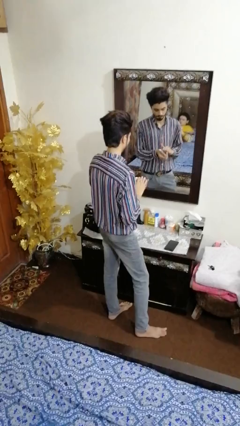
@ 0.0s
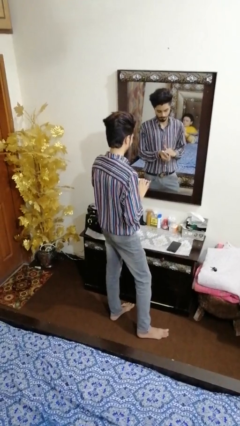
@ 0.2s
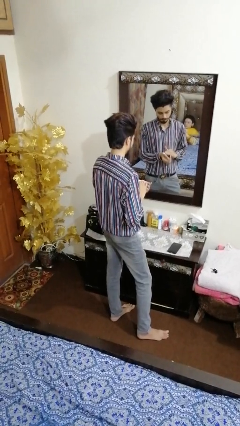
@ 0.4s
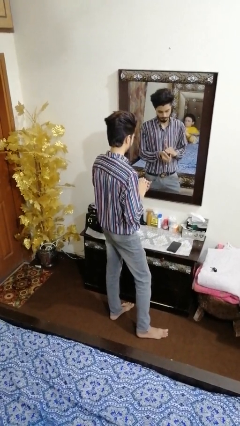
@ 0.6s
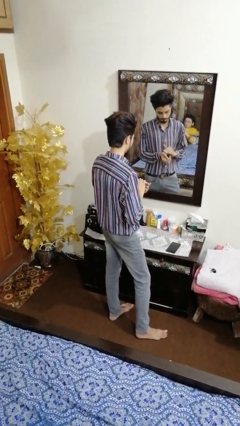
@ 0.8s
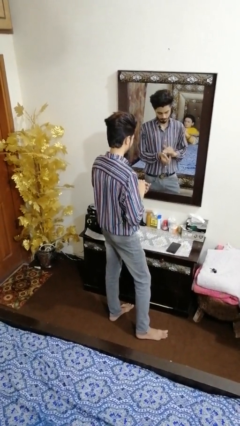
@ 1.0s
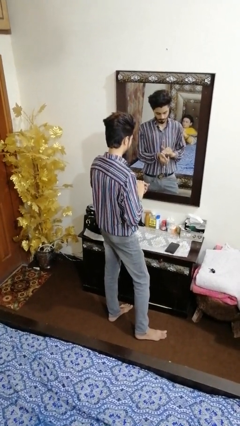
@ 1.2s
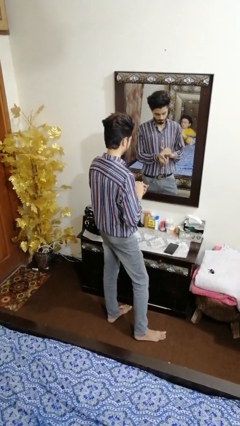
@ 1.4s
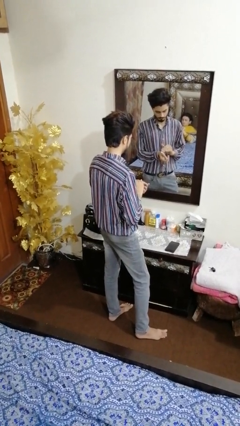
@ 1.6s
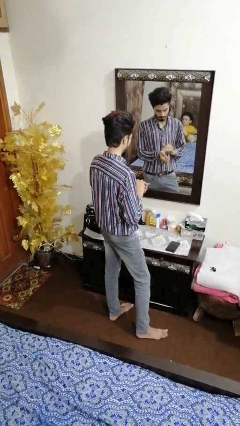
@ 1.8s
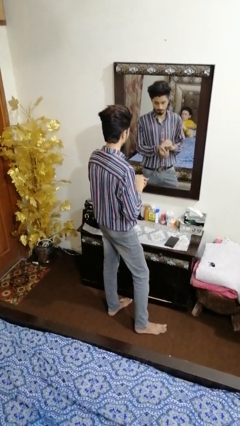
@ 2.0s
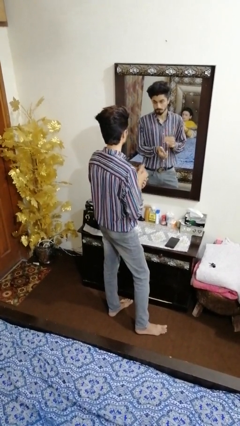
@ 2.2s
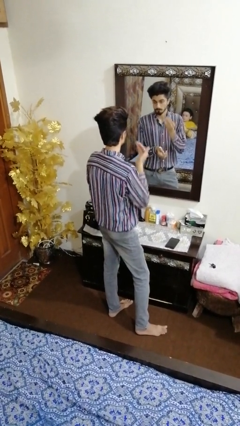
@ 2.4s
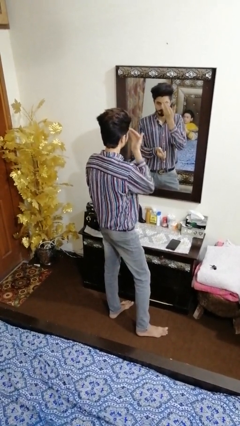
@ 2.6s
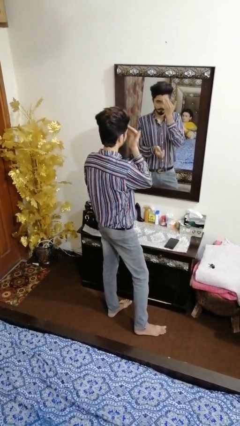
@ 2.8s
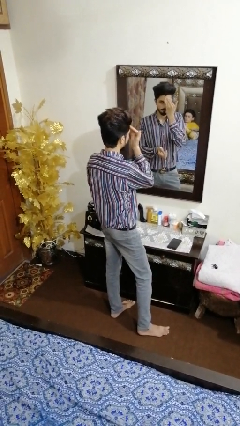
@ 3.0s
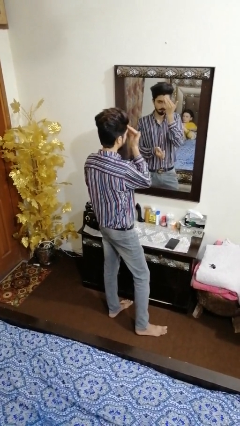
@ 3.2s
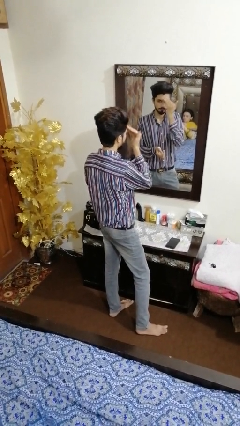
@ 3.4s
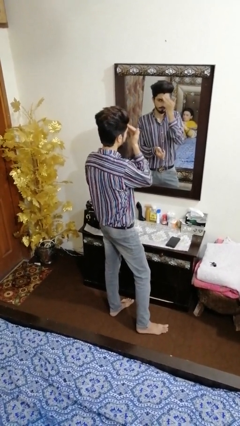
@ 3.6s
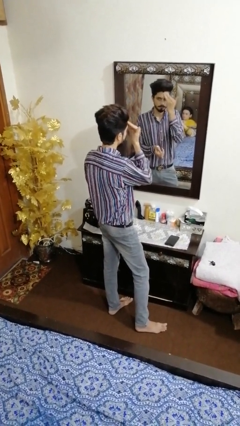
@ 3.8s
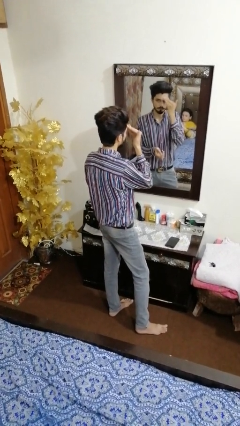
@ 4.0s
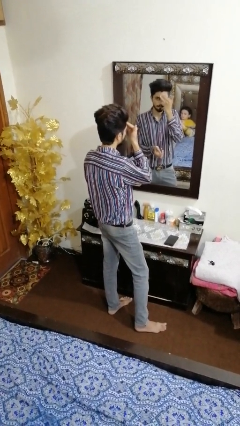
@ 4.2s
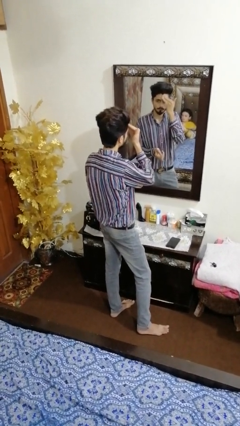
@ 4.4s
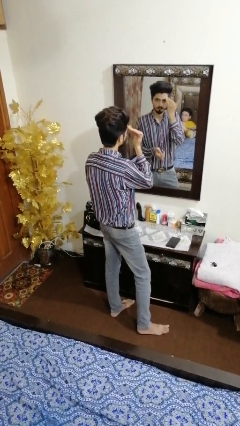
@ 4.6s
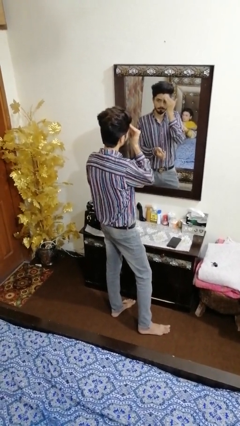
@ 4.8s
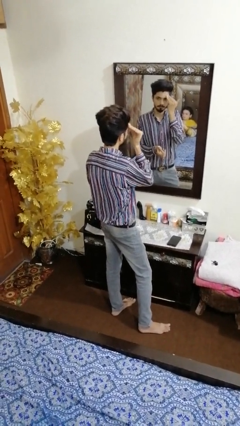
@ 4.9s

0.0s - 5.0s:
person applies foundation makeup

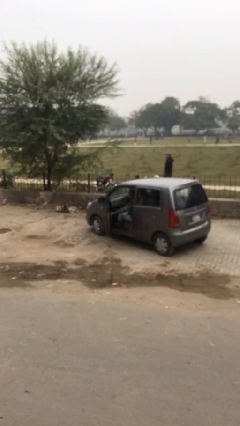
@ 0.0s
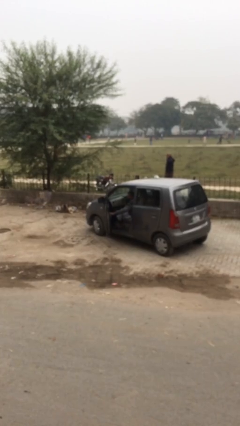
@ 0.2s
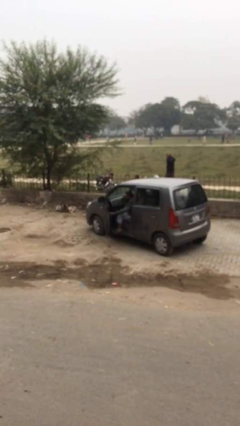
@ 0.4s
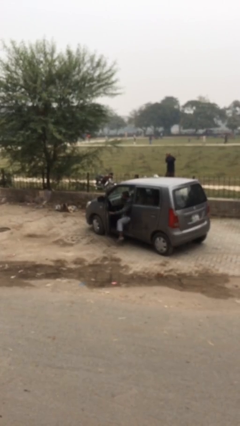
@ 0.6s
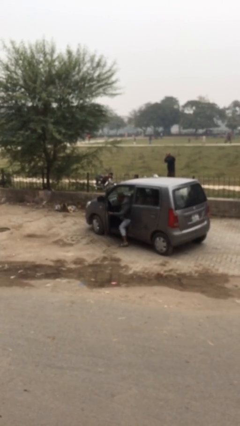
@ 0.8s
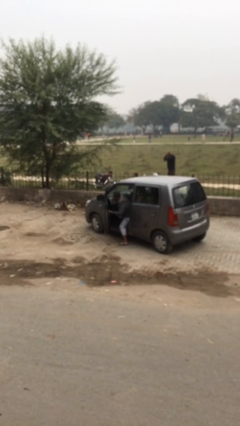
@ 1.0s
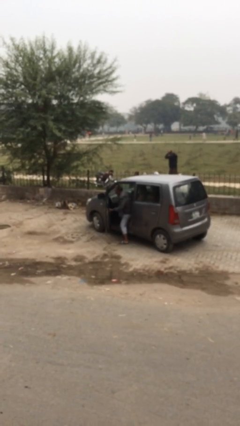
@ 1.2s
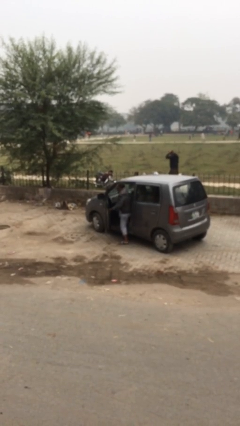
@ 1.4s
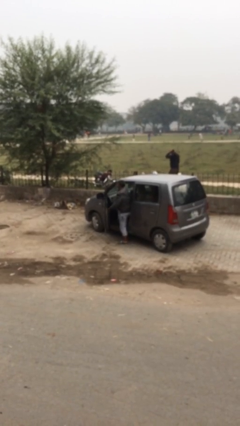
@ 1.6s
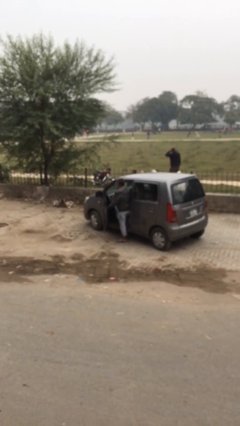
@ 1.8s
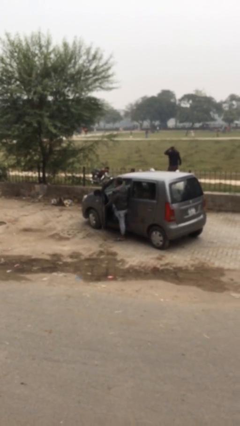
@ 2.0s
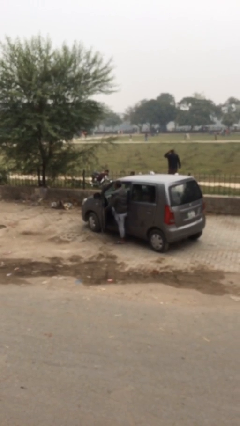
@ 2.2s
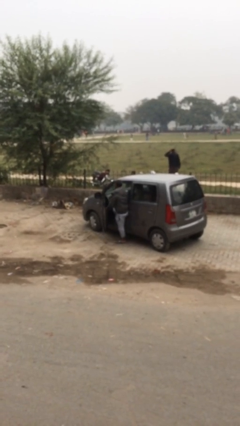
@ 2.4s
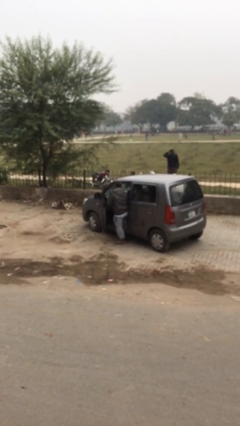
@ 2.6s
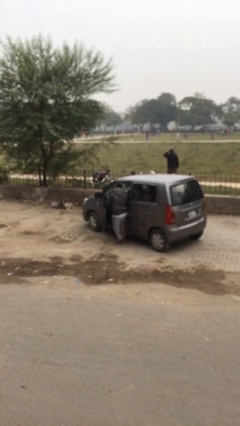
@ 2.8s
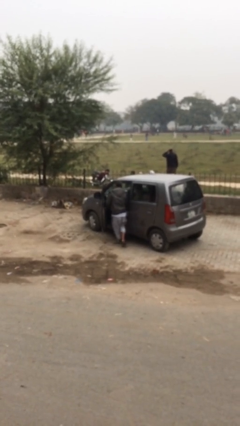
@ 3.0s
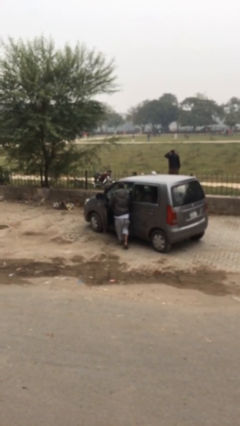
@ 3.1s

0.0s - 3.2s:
person exits car

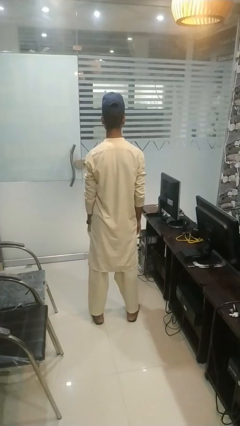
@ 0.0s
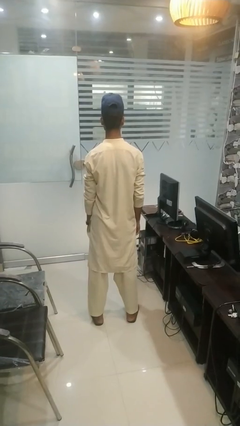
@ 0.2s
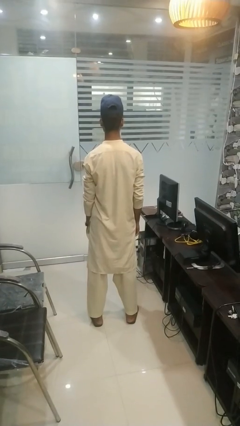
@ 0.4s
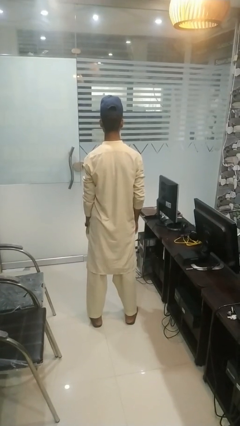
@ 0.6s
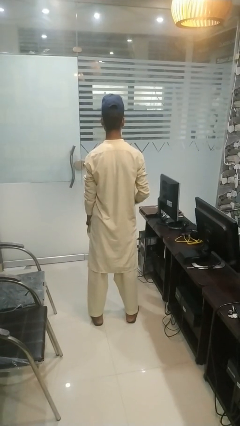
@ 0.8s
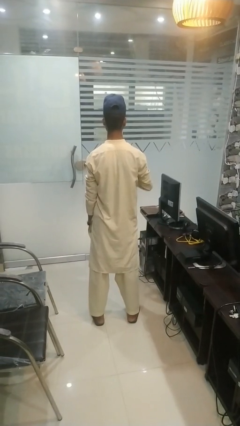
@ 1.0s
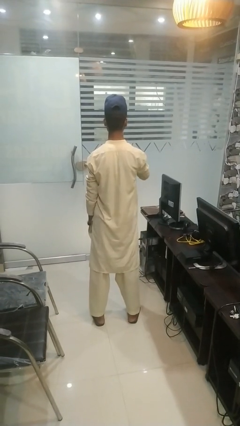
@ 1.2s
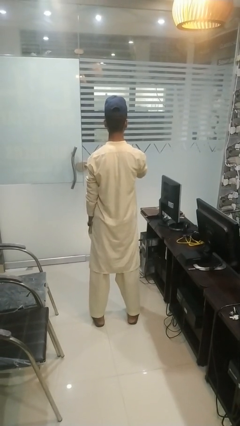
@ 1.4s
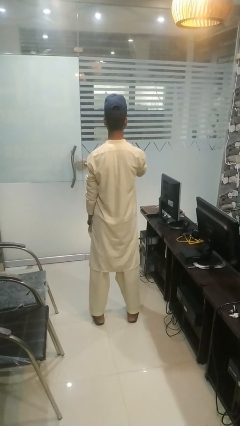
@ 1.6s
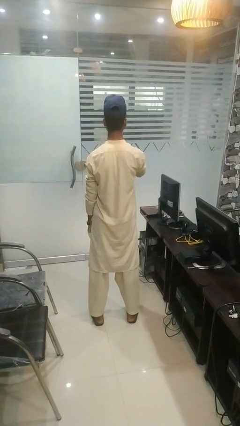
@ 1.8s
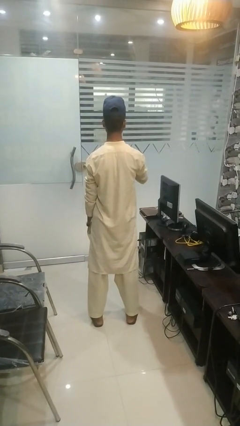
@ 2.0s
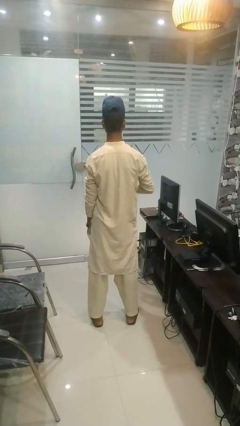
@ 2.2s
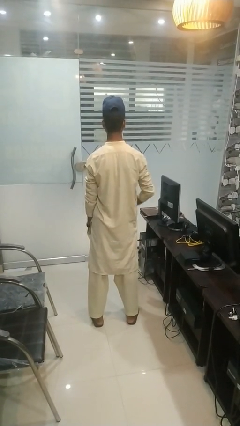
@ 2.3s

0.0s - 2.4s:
person gestures be quiet

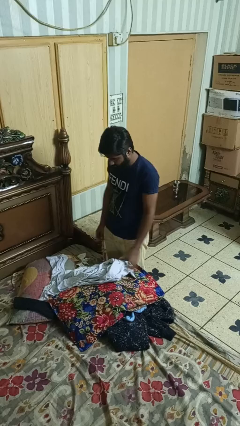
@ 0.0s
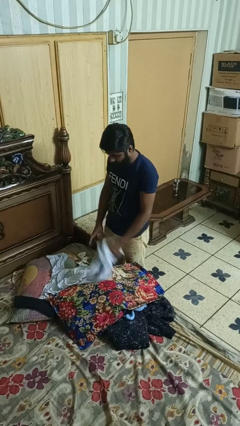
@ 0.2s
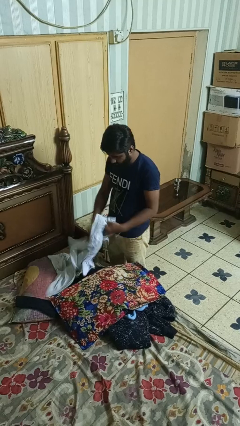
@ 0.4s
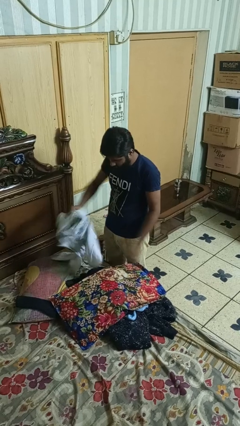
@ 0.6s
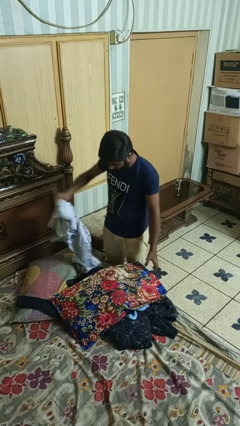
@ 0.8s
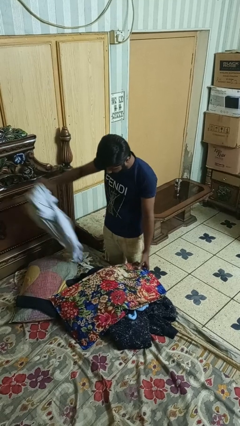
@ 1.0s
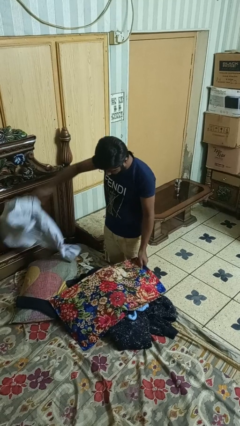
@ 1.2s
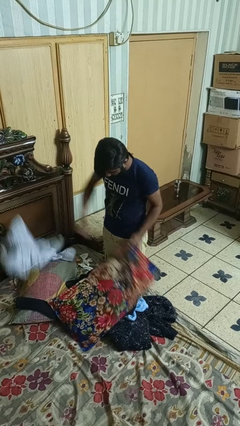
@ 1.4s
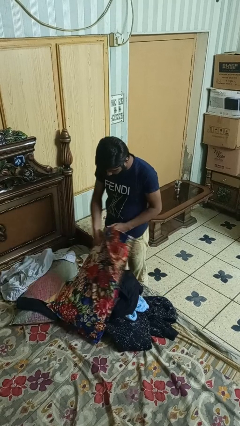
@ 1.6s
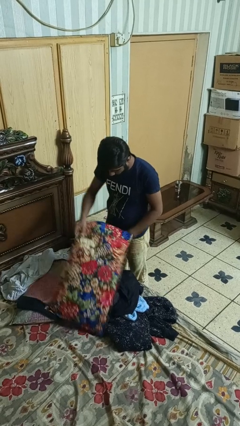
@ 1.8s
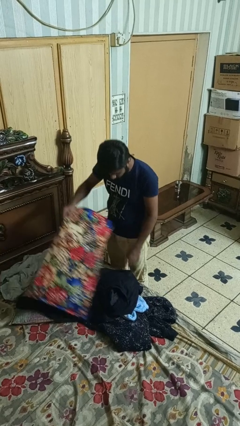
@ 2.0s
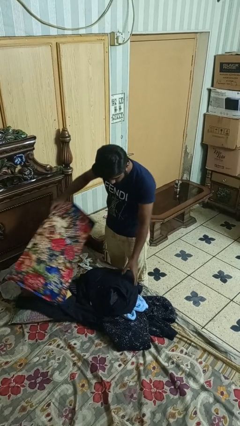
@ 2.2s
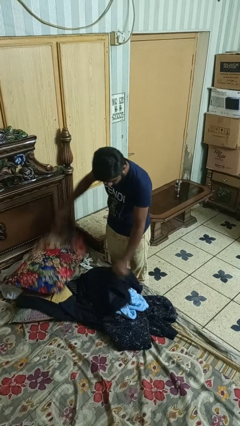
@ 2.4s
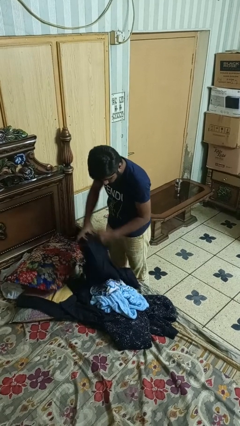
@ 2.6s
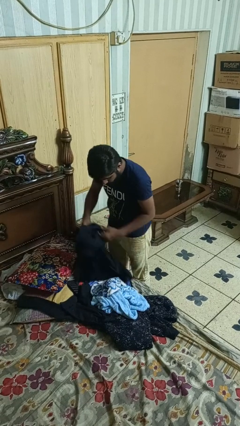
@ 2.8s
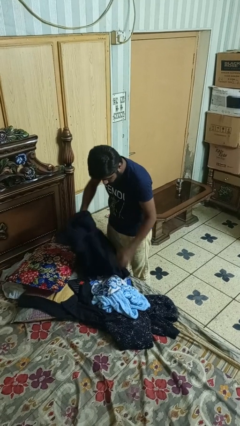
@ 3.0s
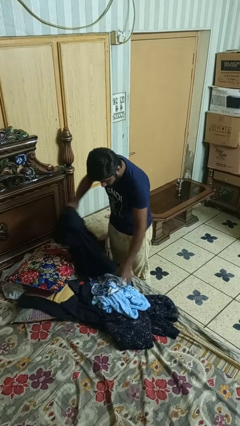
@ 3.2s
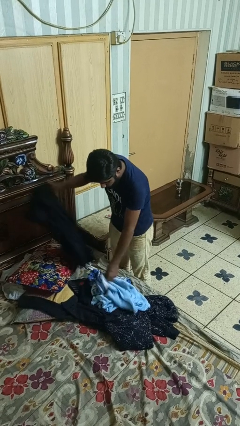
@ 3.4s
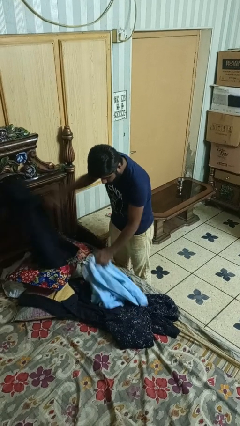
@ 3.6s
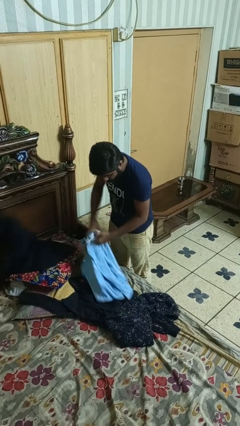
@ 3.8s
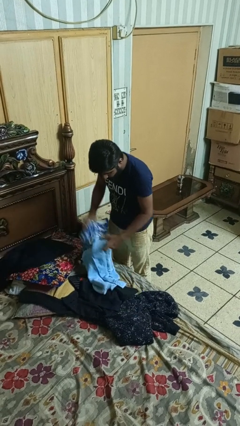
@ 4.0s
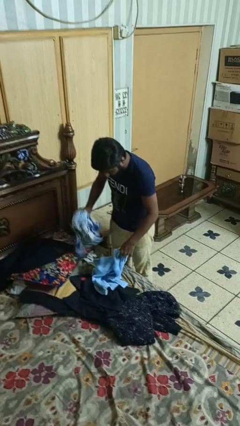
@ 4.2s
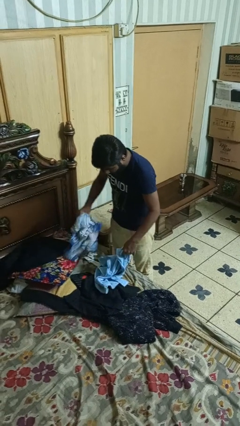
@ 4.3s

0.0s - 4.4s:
person searches under bed

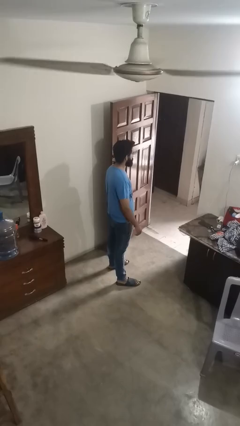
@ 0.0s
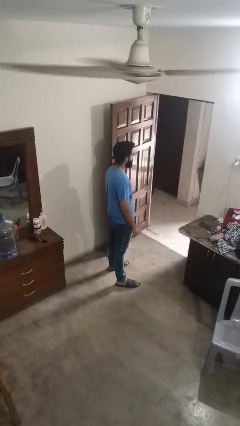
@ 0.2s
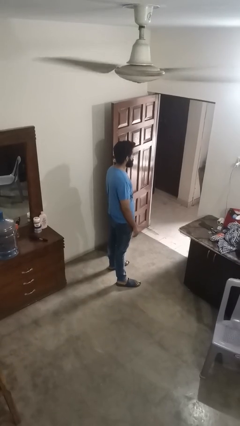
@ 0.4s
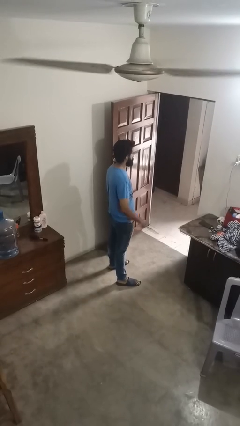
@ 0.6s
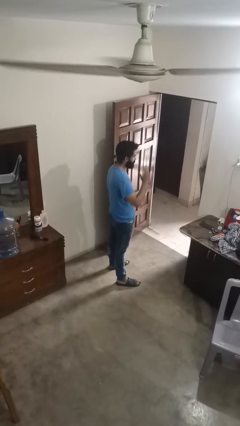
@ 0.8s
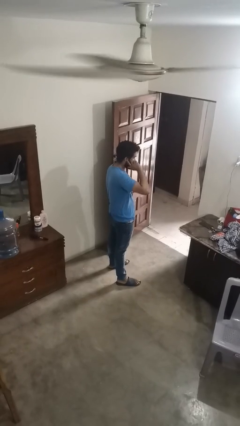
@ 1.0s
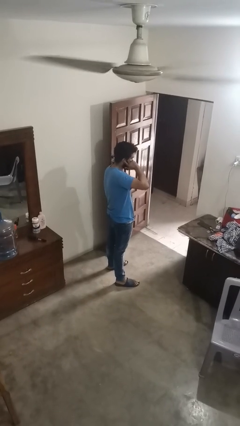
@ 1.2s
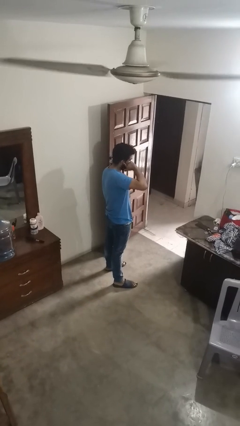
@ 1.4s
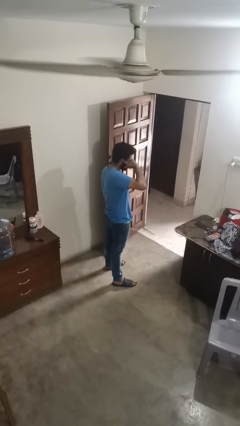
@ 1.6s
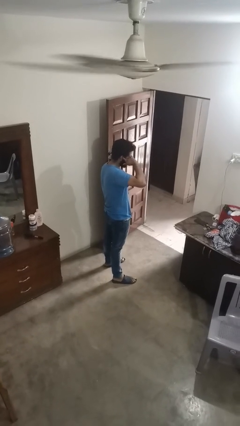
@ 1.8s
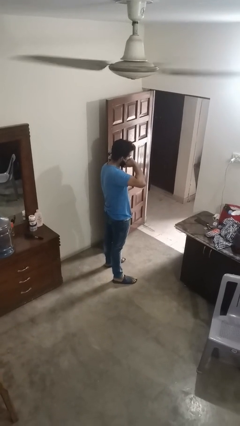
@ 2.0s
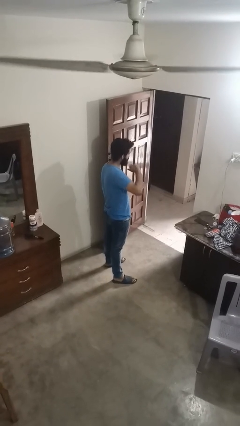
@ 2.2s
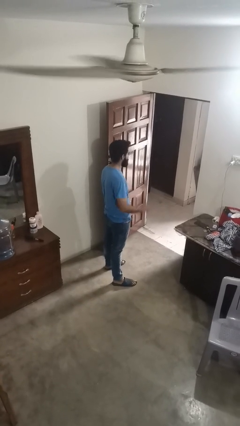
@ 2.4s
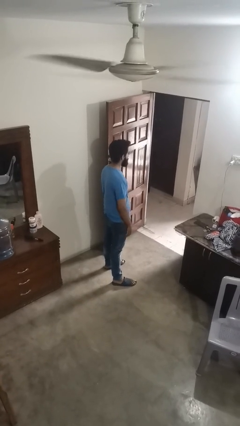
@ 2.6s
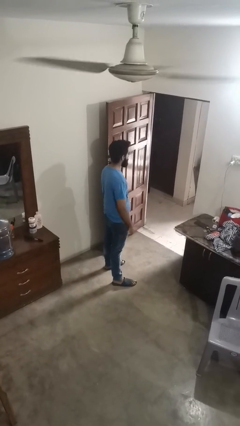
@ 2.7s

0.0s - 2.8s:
person touches earlobe
